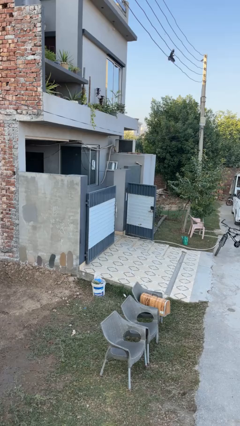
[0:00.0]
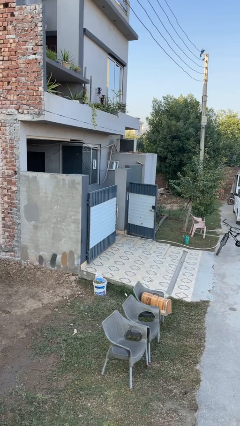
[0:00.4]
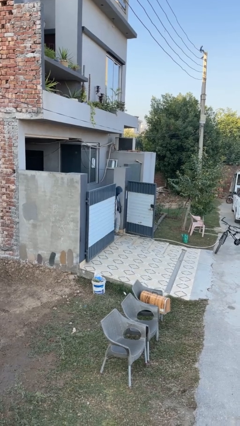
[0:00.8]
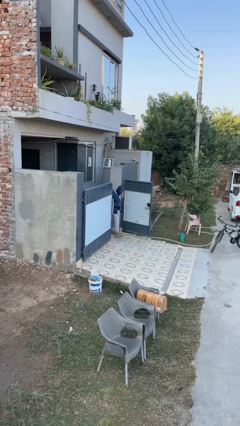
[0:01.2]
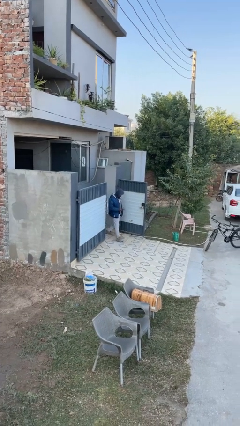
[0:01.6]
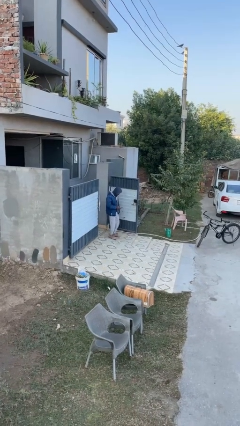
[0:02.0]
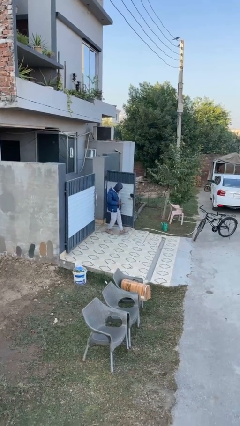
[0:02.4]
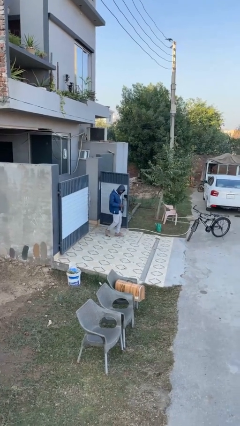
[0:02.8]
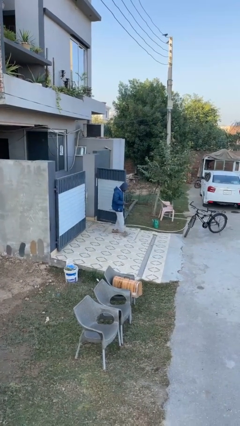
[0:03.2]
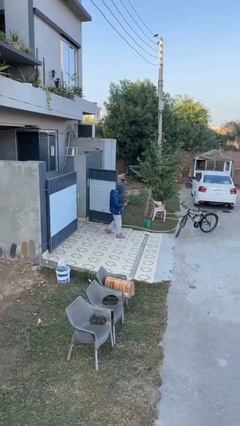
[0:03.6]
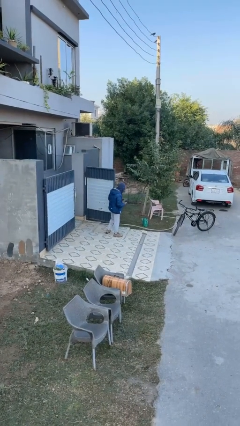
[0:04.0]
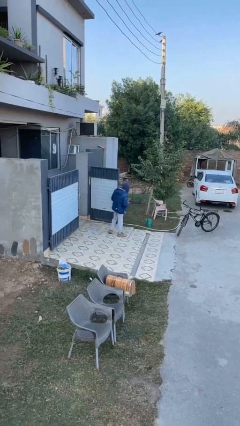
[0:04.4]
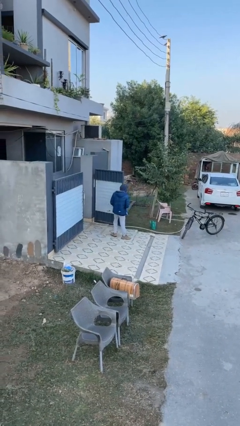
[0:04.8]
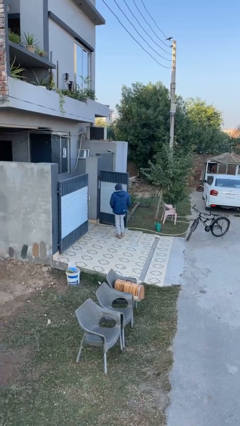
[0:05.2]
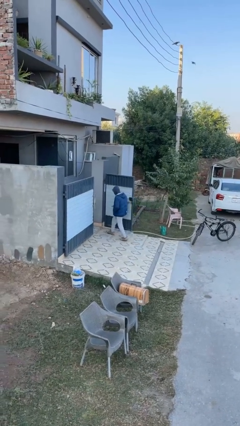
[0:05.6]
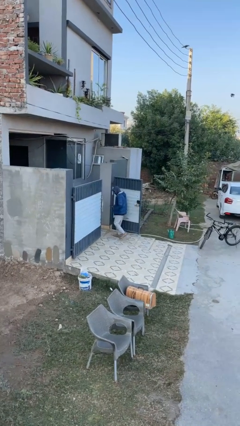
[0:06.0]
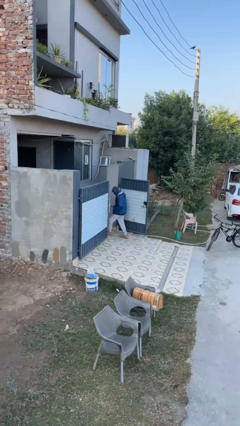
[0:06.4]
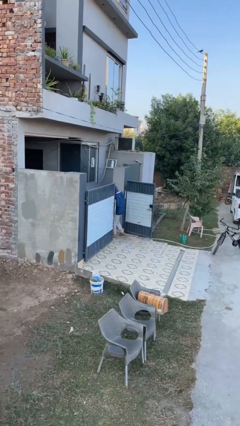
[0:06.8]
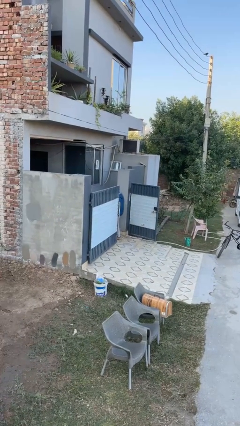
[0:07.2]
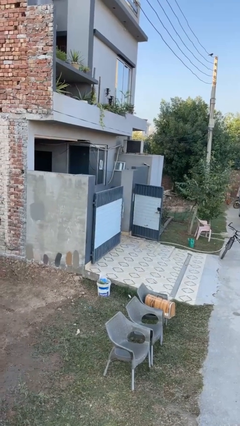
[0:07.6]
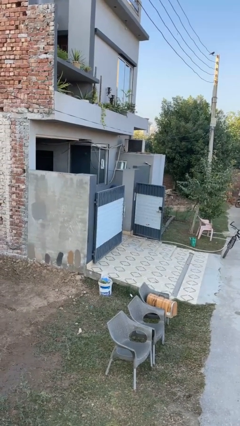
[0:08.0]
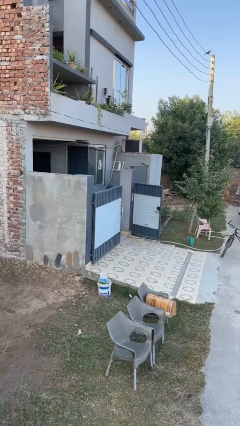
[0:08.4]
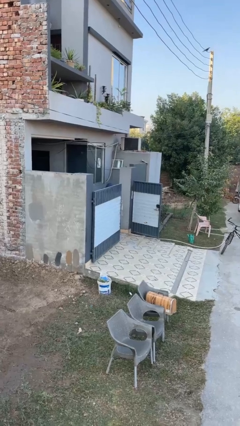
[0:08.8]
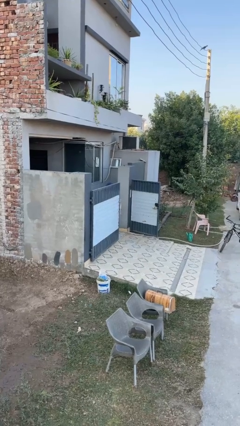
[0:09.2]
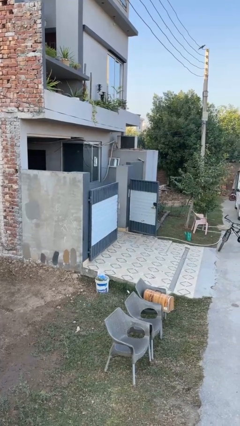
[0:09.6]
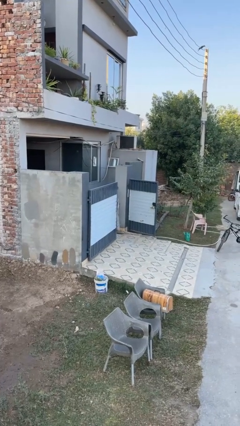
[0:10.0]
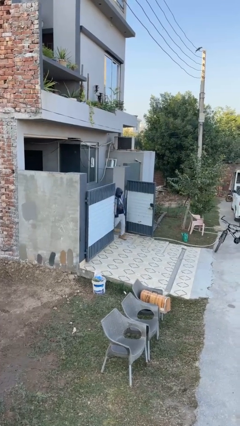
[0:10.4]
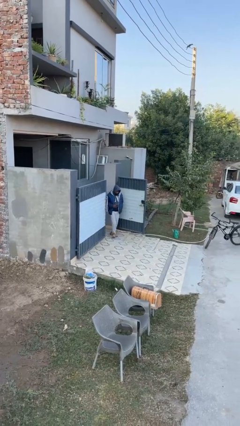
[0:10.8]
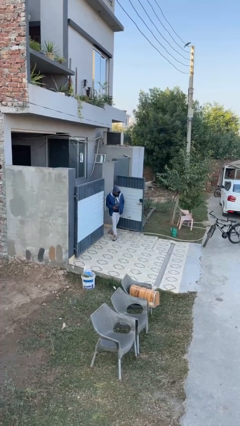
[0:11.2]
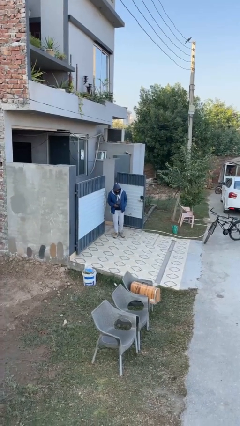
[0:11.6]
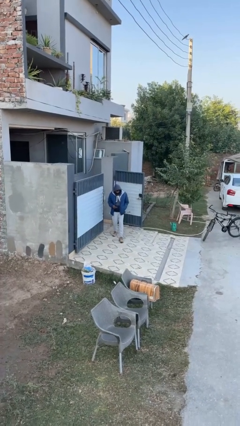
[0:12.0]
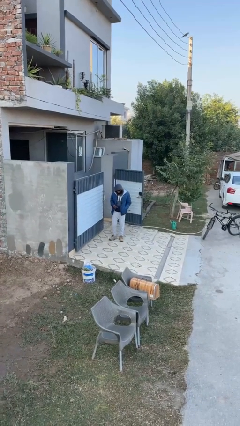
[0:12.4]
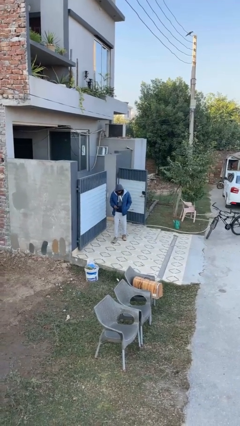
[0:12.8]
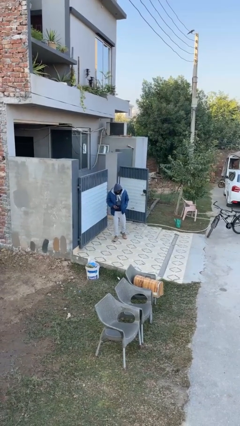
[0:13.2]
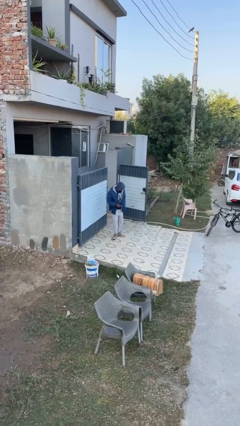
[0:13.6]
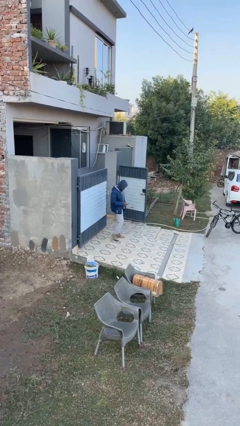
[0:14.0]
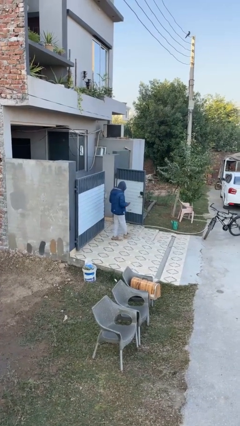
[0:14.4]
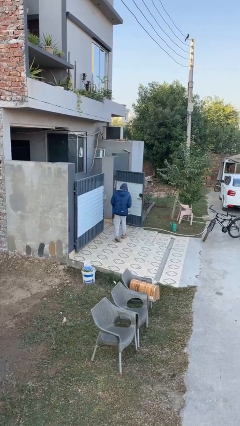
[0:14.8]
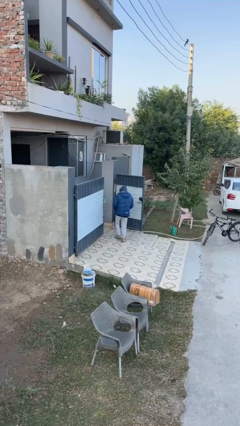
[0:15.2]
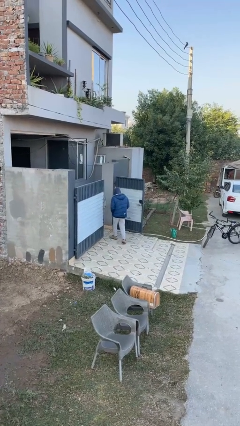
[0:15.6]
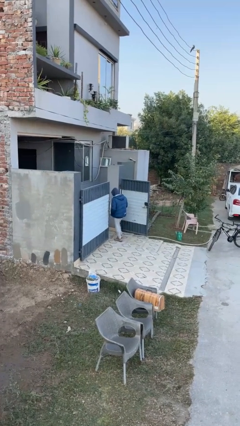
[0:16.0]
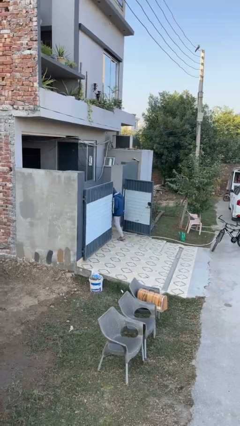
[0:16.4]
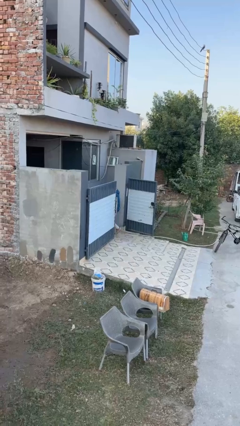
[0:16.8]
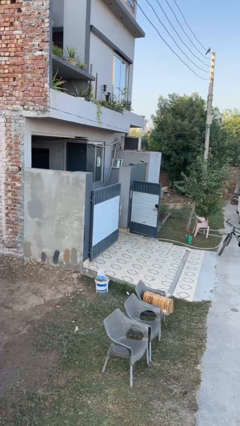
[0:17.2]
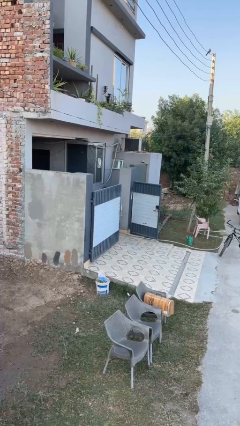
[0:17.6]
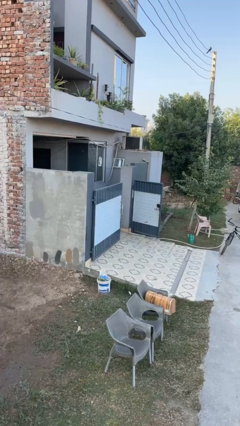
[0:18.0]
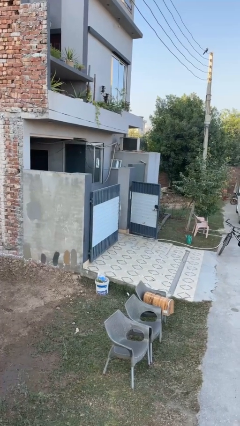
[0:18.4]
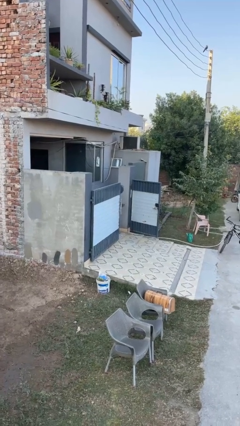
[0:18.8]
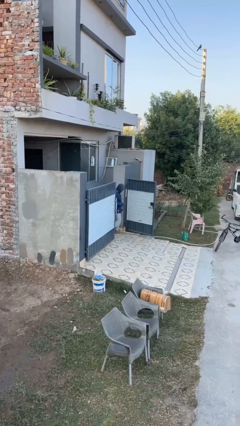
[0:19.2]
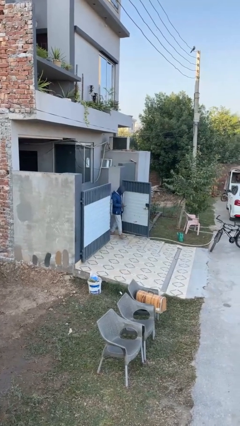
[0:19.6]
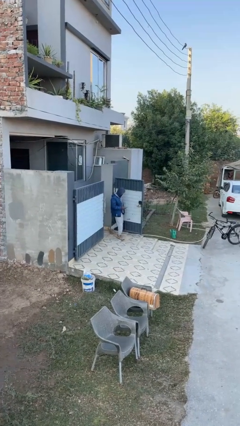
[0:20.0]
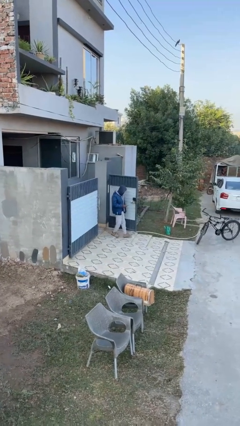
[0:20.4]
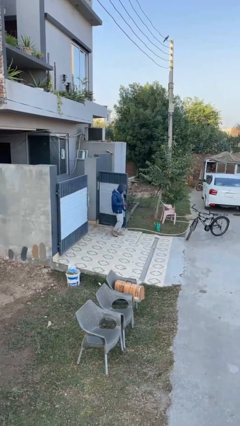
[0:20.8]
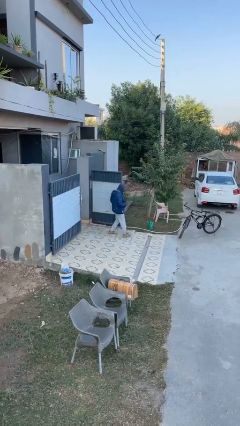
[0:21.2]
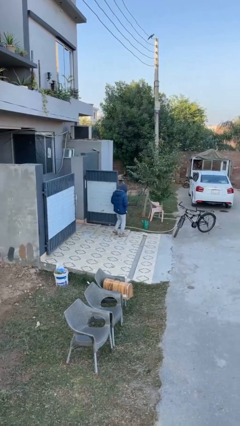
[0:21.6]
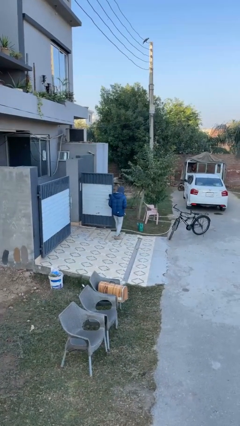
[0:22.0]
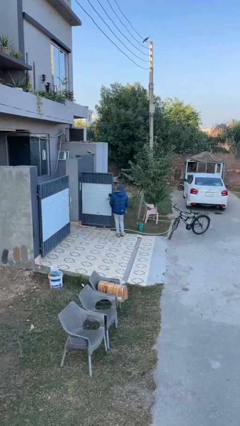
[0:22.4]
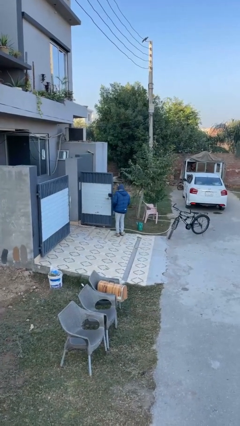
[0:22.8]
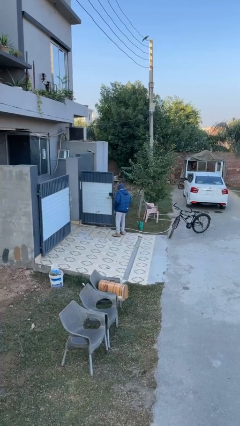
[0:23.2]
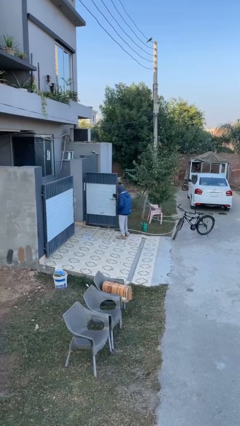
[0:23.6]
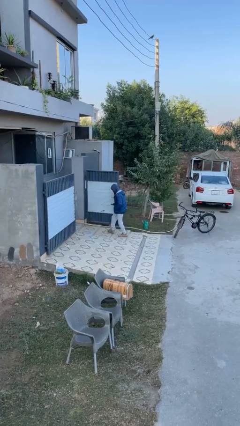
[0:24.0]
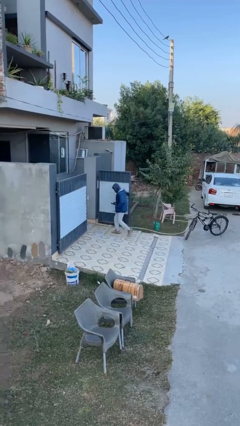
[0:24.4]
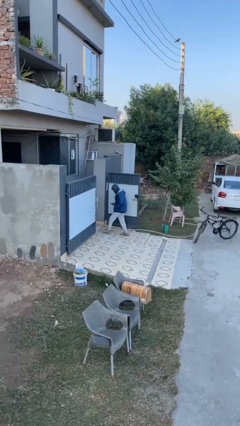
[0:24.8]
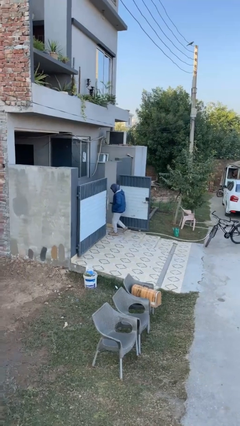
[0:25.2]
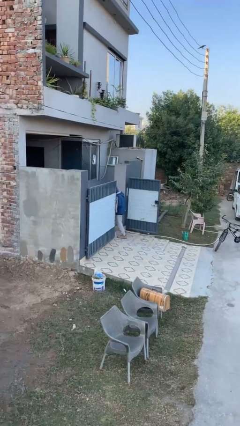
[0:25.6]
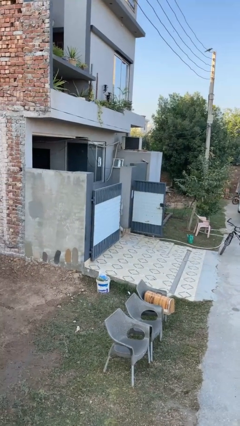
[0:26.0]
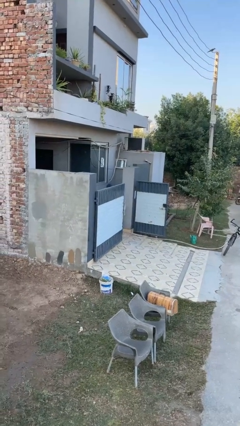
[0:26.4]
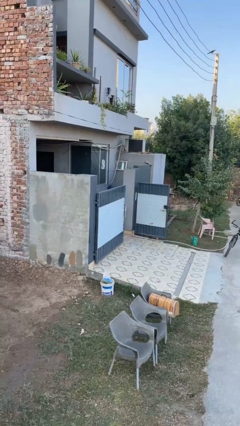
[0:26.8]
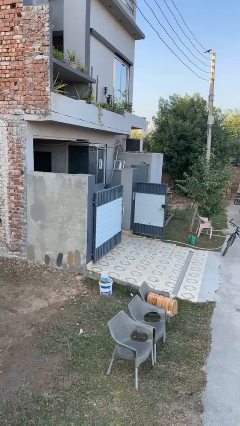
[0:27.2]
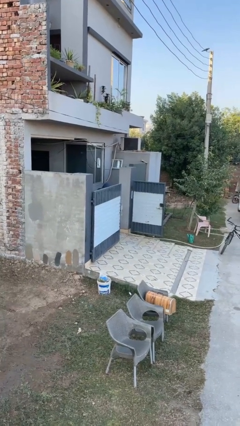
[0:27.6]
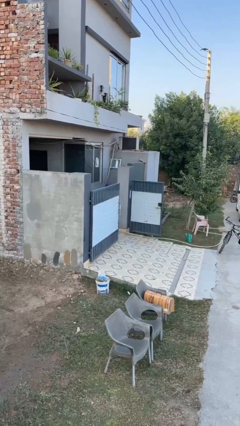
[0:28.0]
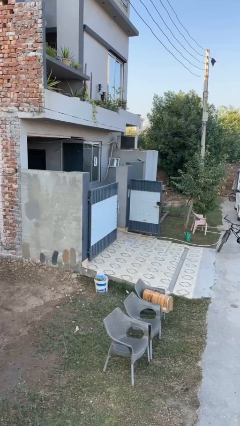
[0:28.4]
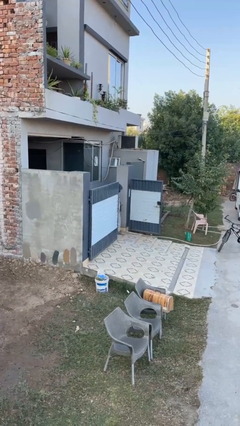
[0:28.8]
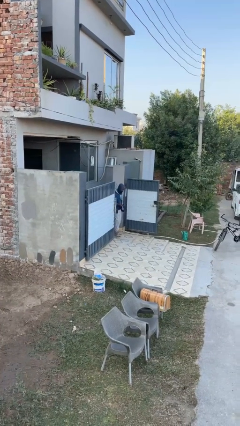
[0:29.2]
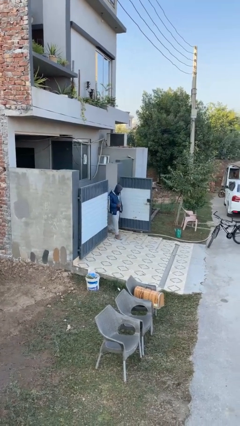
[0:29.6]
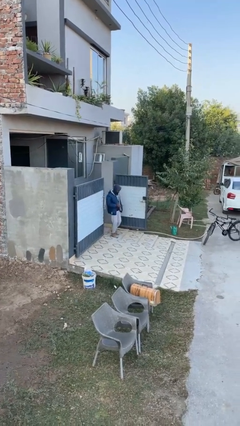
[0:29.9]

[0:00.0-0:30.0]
person texts on phone

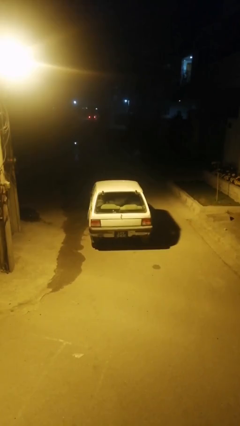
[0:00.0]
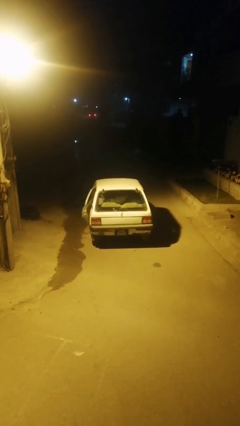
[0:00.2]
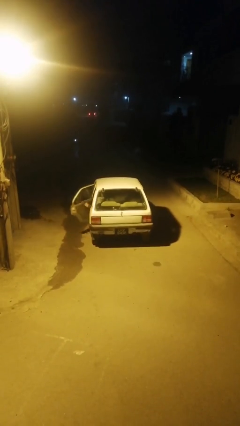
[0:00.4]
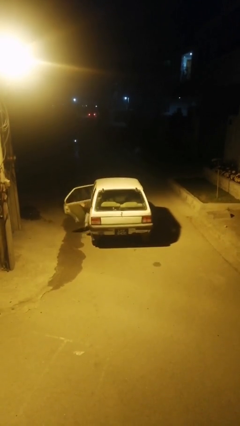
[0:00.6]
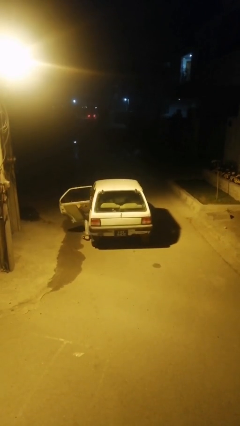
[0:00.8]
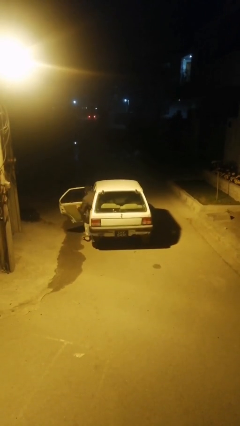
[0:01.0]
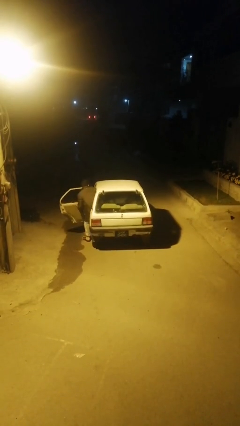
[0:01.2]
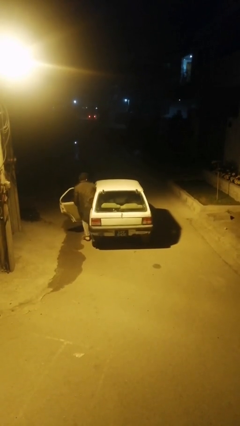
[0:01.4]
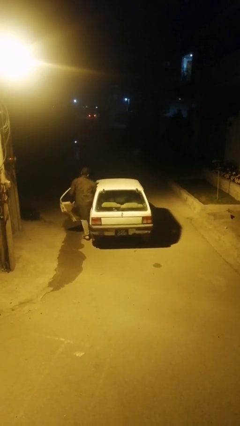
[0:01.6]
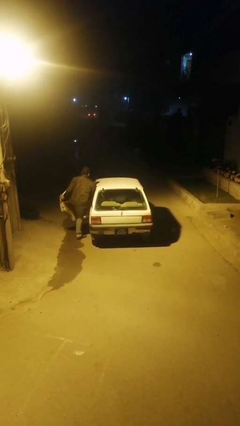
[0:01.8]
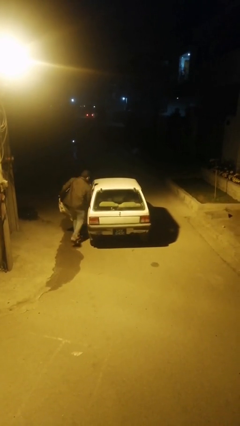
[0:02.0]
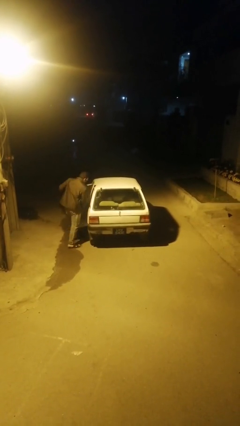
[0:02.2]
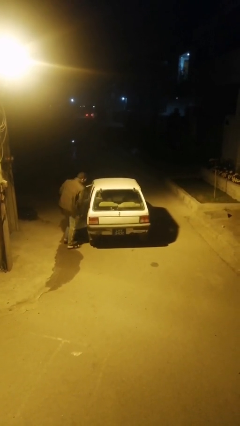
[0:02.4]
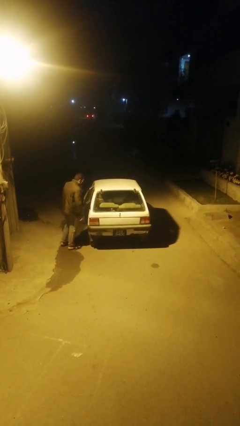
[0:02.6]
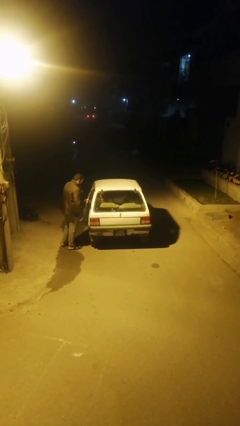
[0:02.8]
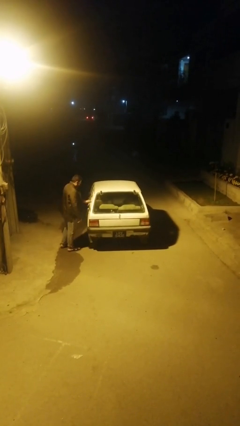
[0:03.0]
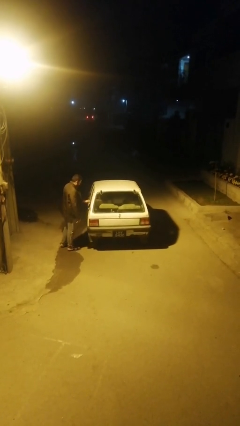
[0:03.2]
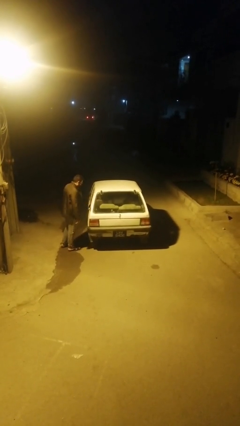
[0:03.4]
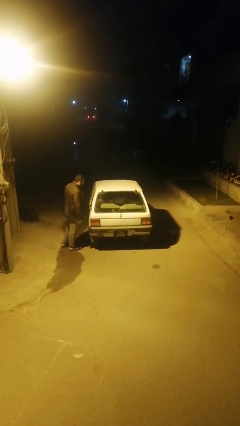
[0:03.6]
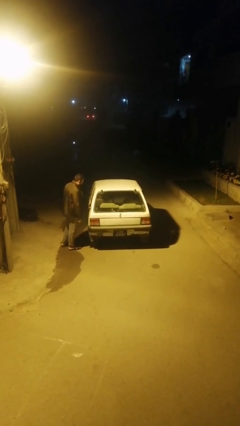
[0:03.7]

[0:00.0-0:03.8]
car drops off person
